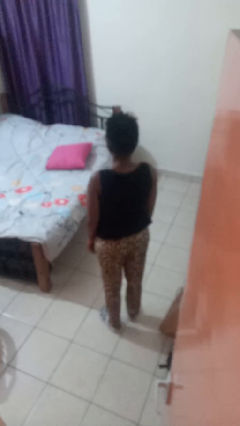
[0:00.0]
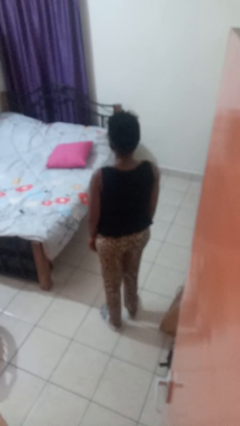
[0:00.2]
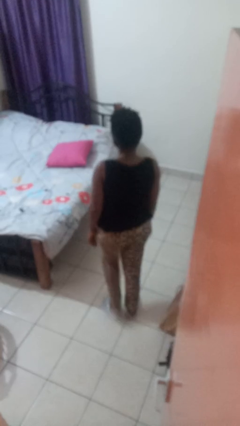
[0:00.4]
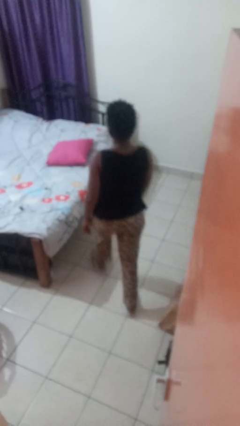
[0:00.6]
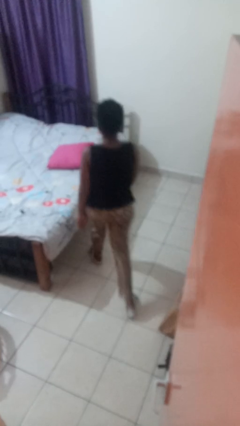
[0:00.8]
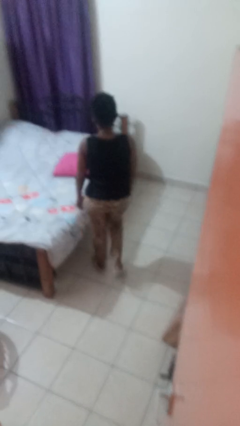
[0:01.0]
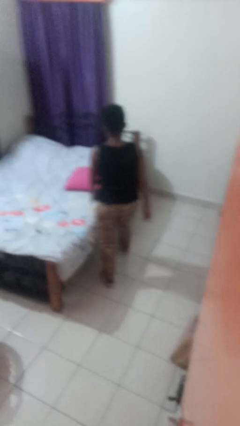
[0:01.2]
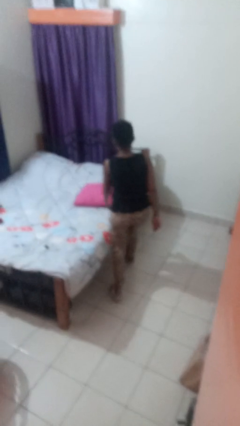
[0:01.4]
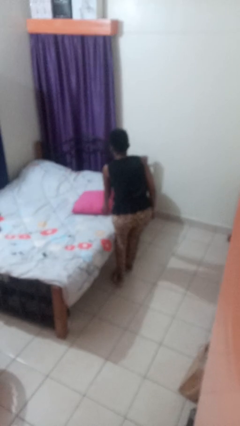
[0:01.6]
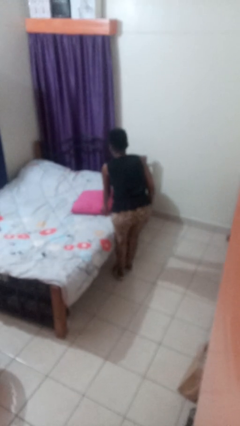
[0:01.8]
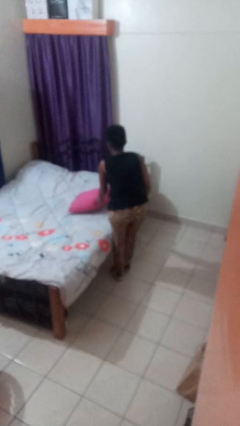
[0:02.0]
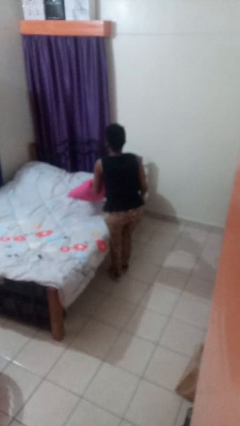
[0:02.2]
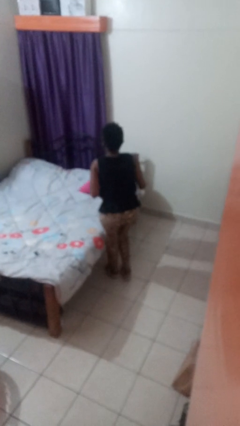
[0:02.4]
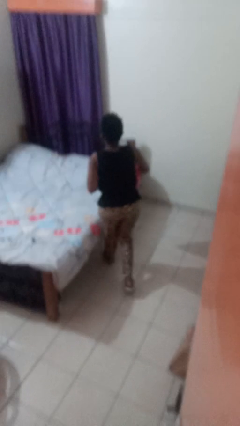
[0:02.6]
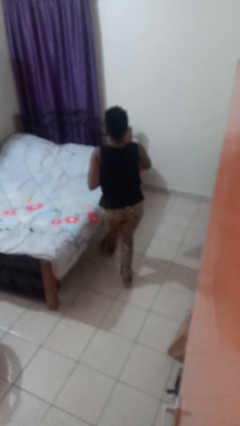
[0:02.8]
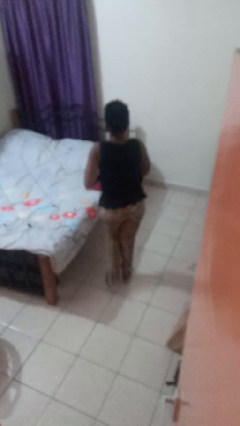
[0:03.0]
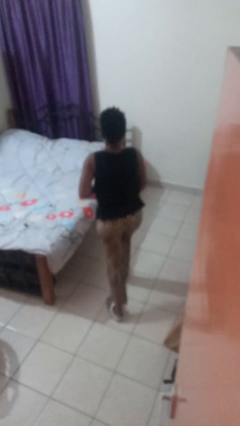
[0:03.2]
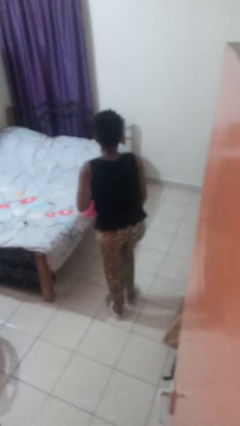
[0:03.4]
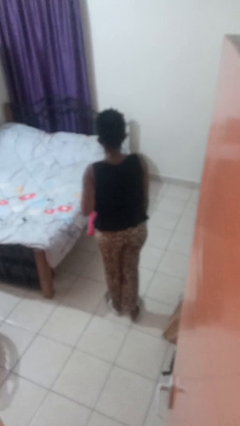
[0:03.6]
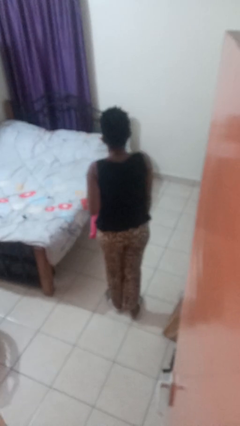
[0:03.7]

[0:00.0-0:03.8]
person picks up object from bed

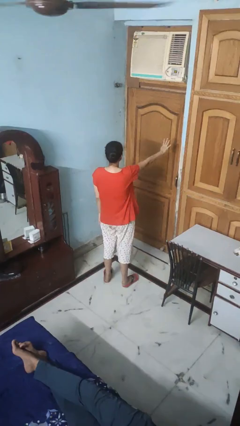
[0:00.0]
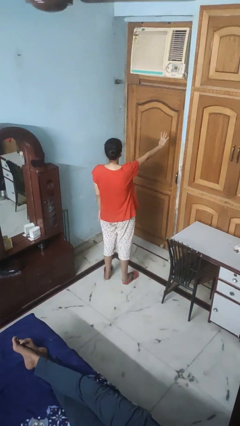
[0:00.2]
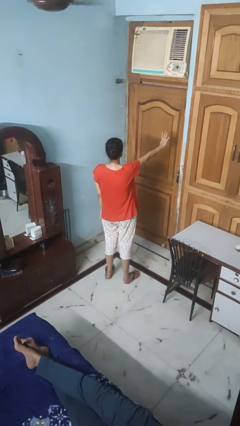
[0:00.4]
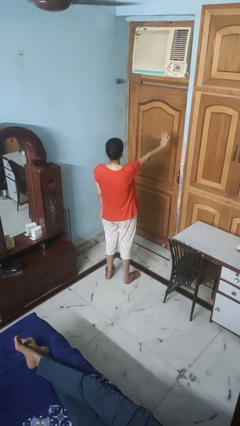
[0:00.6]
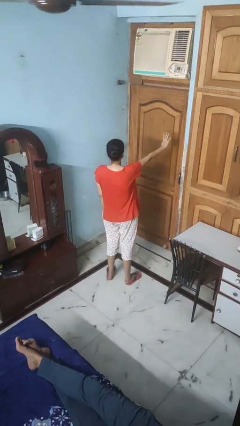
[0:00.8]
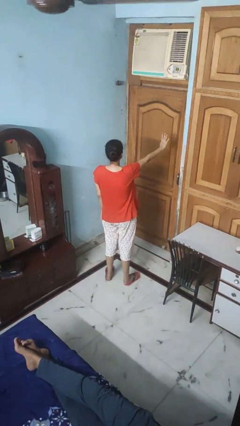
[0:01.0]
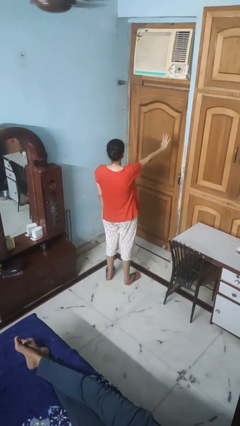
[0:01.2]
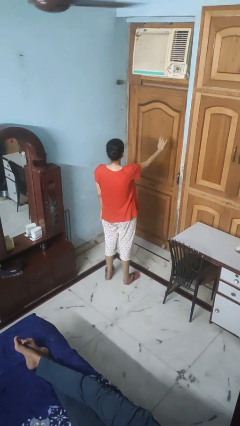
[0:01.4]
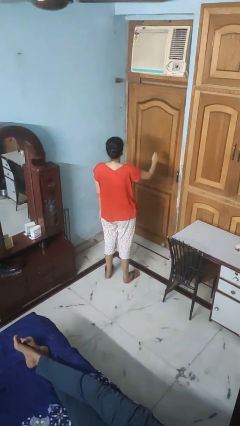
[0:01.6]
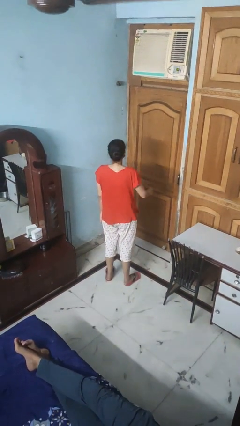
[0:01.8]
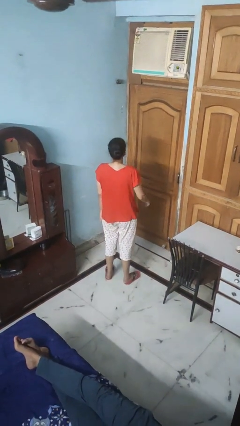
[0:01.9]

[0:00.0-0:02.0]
person gestures number four

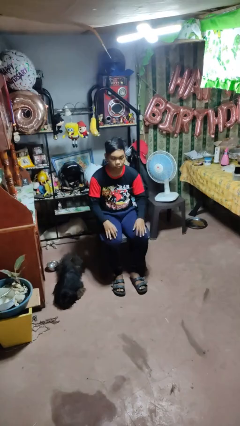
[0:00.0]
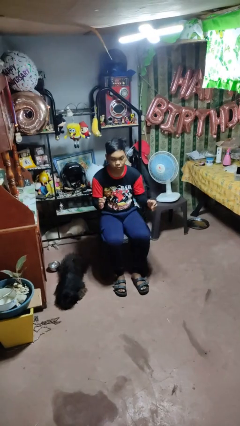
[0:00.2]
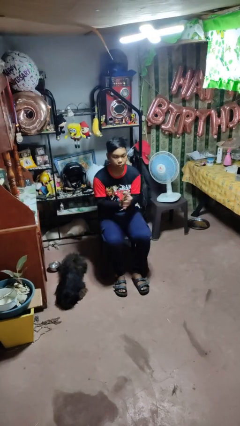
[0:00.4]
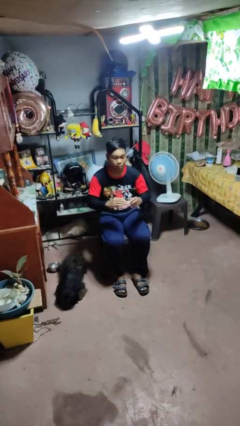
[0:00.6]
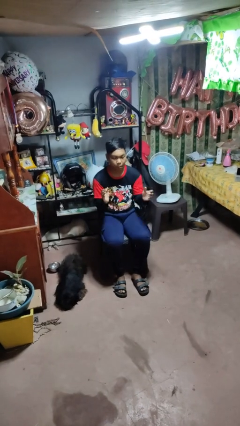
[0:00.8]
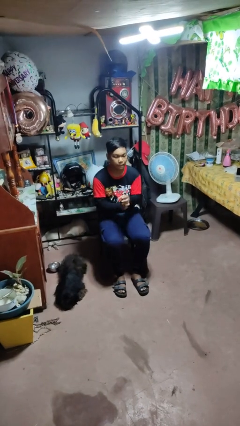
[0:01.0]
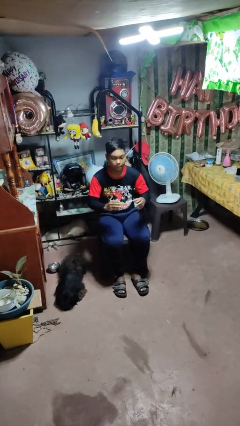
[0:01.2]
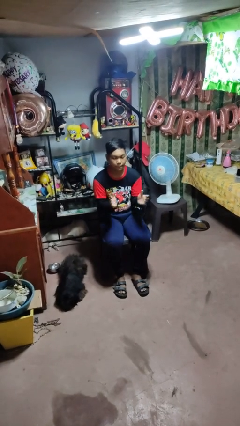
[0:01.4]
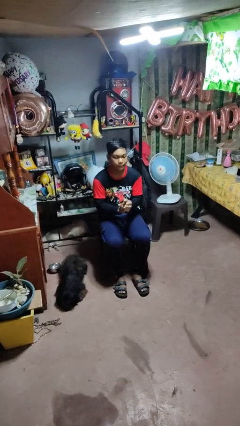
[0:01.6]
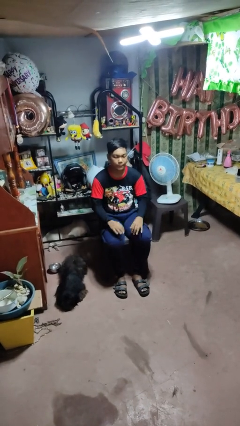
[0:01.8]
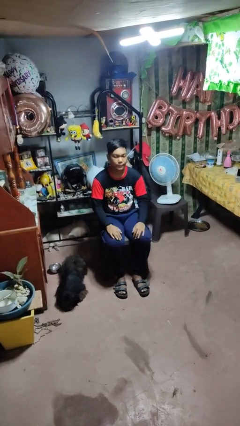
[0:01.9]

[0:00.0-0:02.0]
person claps hands

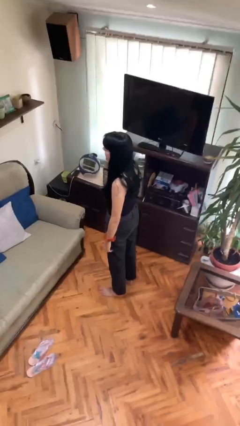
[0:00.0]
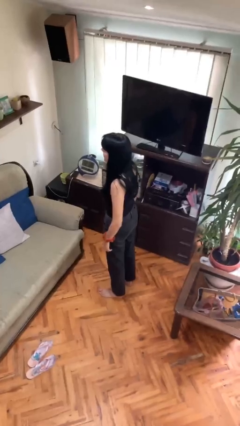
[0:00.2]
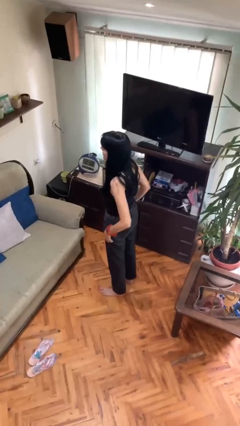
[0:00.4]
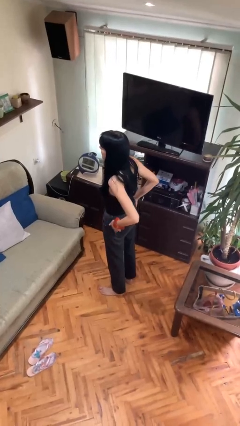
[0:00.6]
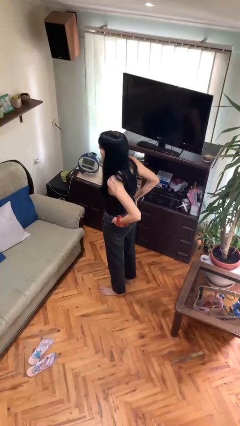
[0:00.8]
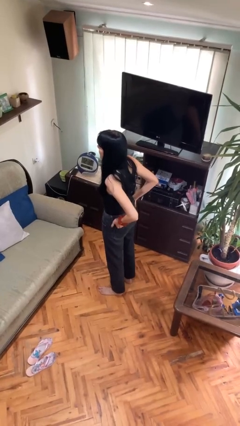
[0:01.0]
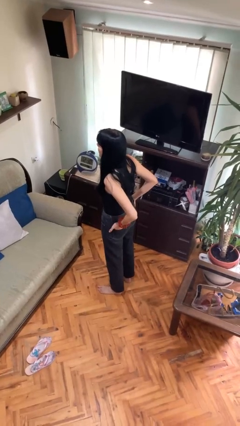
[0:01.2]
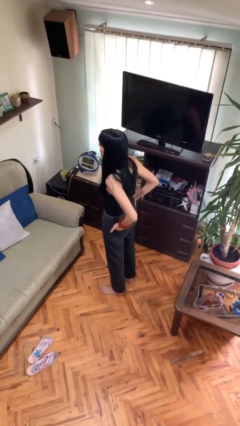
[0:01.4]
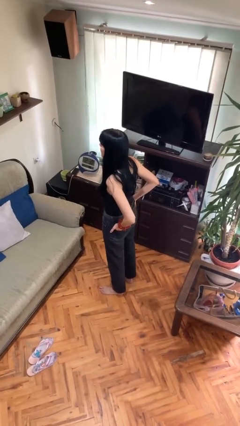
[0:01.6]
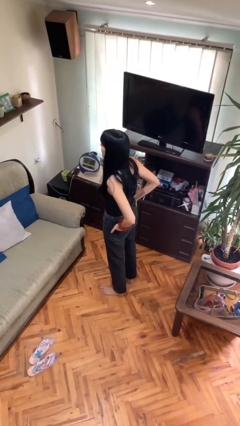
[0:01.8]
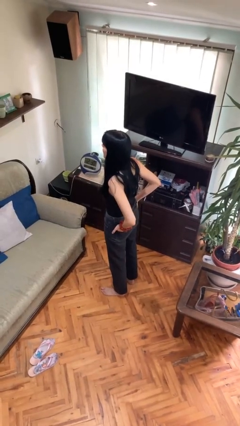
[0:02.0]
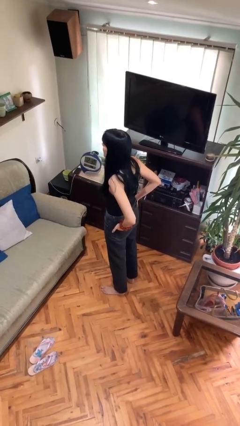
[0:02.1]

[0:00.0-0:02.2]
person puts hands in back pockets

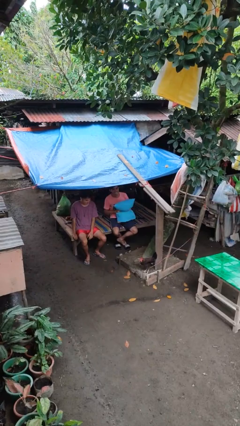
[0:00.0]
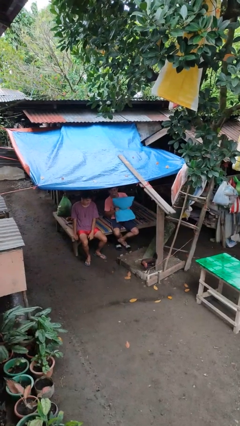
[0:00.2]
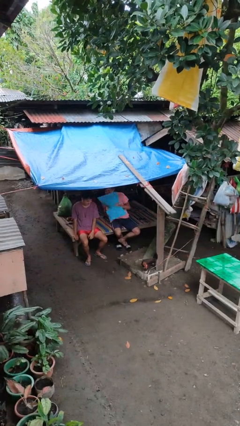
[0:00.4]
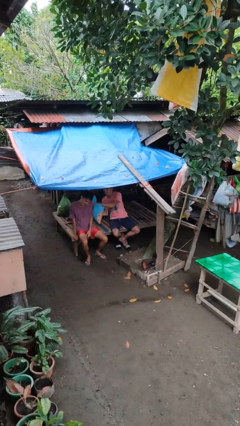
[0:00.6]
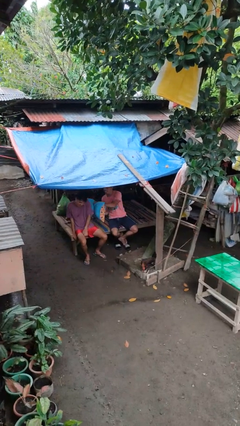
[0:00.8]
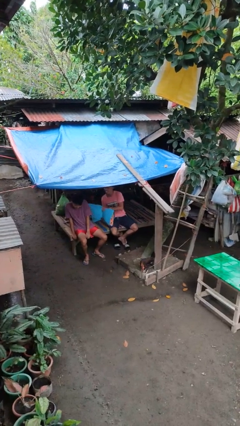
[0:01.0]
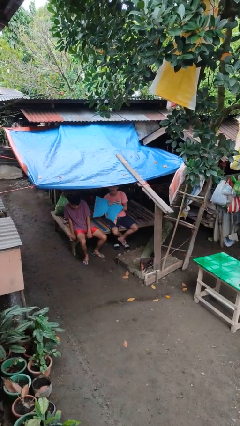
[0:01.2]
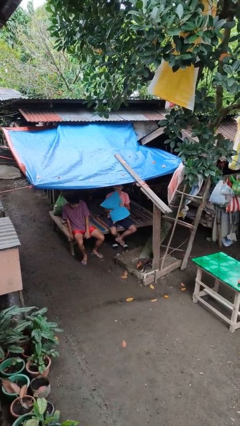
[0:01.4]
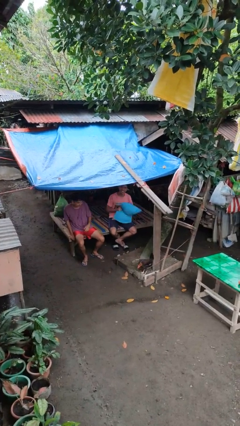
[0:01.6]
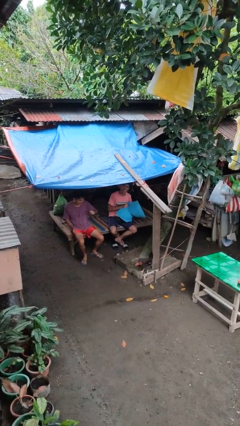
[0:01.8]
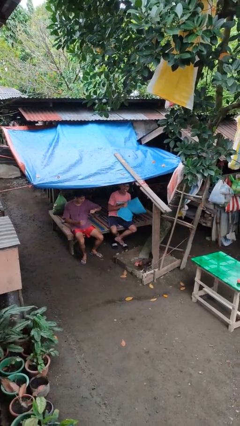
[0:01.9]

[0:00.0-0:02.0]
person hits person with pillow

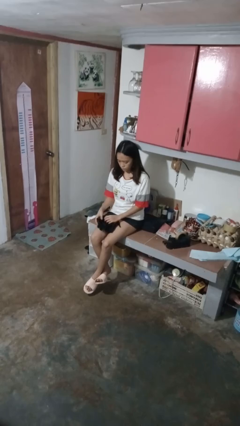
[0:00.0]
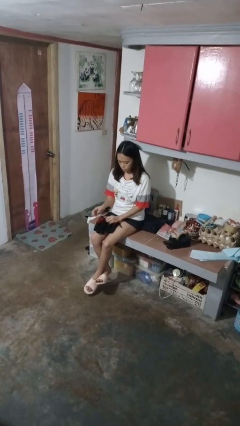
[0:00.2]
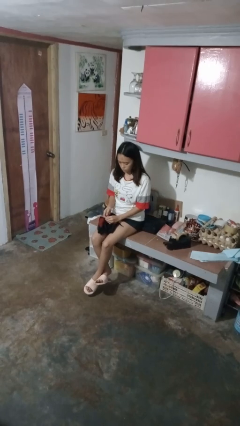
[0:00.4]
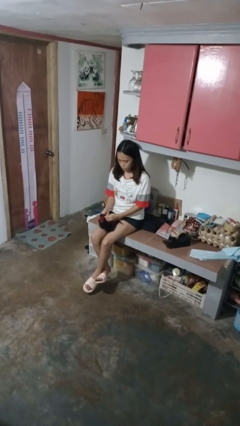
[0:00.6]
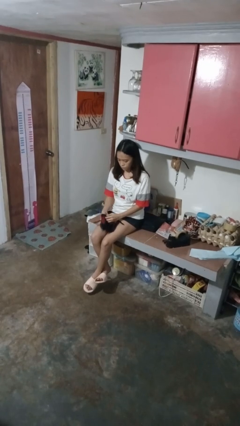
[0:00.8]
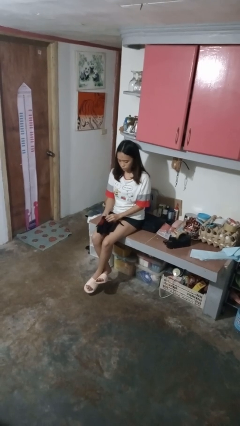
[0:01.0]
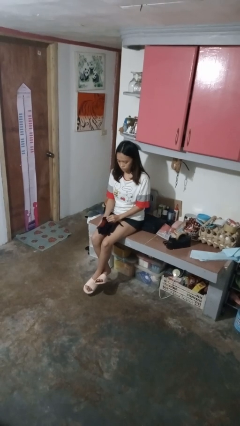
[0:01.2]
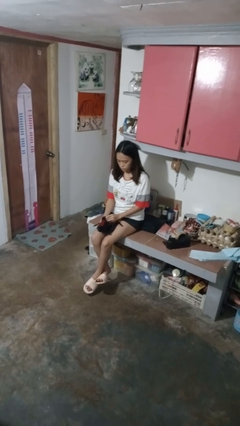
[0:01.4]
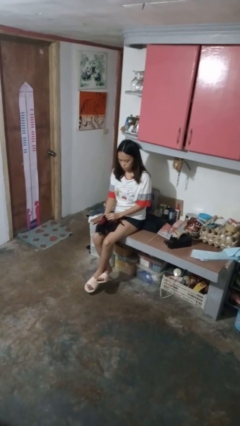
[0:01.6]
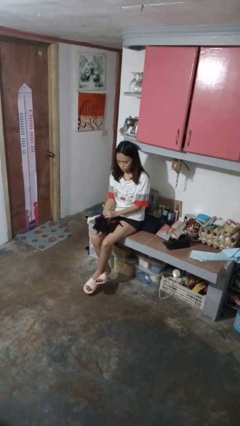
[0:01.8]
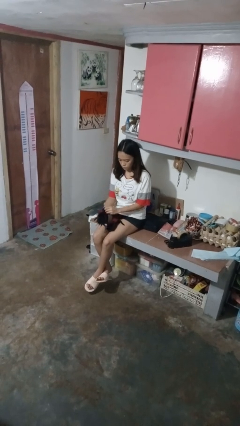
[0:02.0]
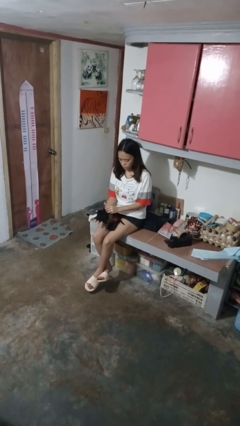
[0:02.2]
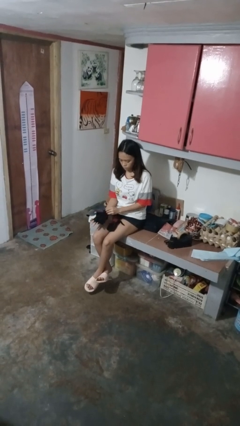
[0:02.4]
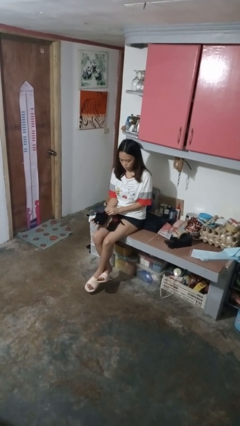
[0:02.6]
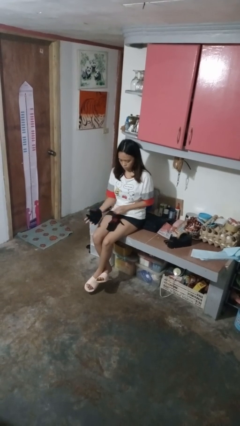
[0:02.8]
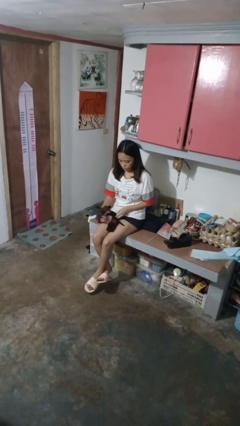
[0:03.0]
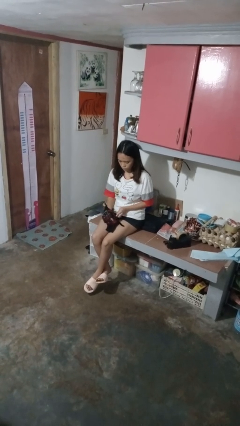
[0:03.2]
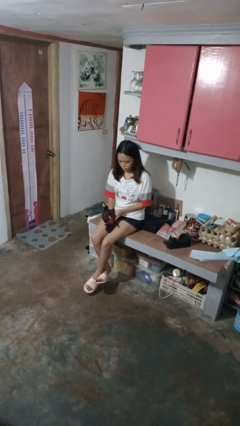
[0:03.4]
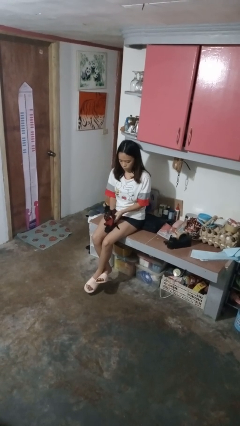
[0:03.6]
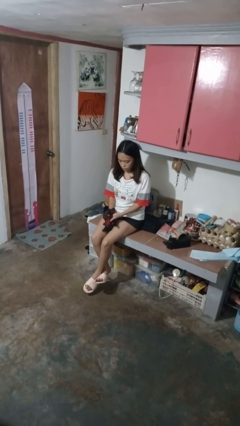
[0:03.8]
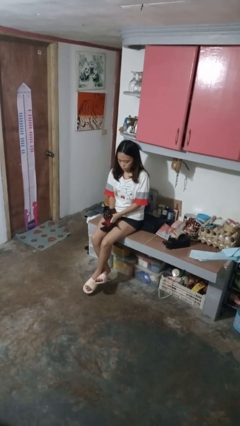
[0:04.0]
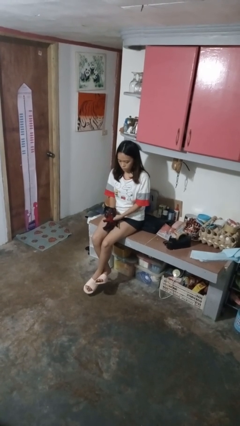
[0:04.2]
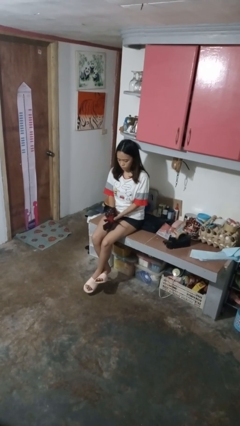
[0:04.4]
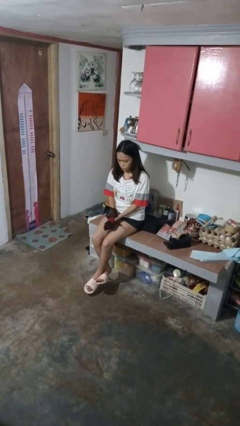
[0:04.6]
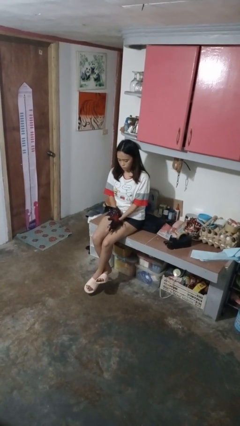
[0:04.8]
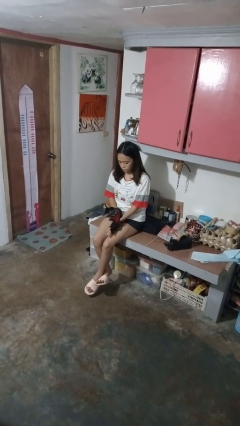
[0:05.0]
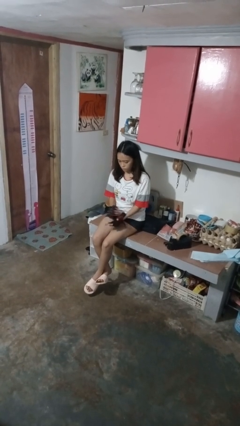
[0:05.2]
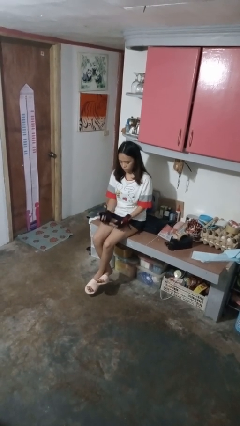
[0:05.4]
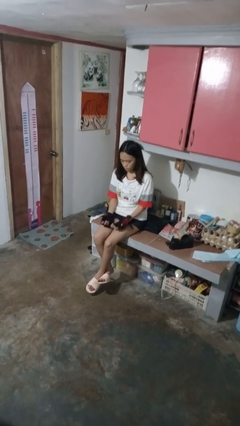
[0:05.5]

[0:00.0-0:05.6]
person puts on gloves
